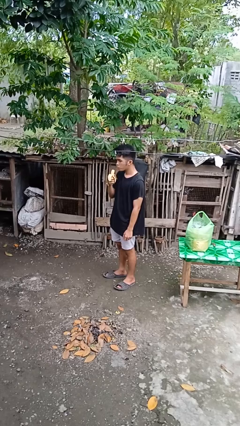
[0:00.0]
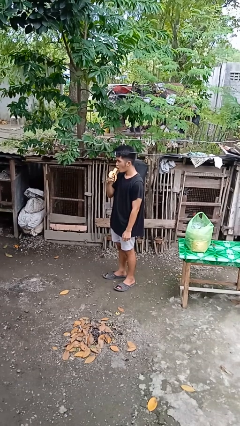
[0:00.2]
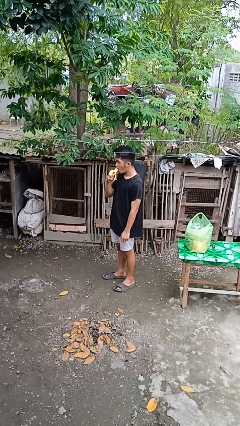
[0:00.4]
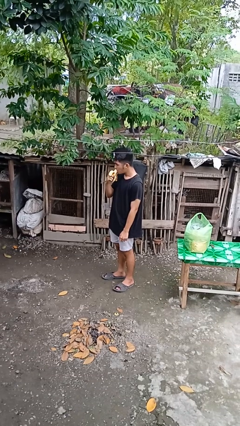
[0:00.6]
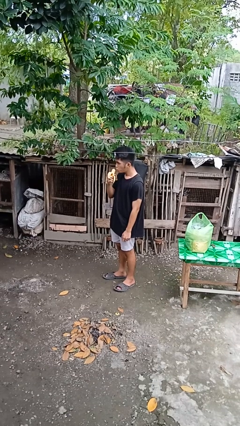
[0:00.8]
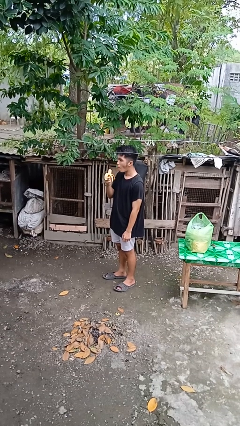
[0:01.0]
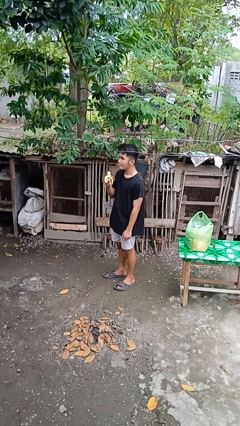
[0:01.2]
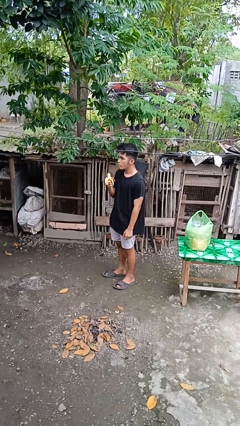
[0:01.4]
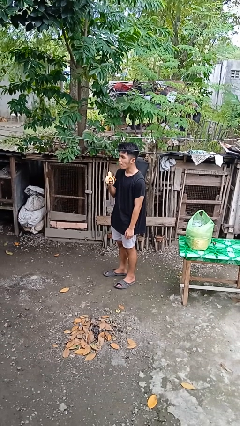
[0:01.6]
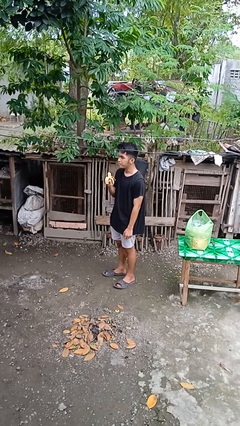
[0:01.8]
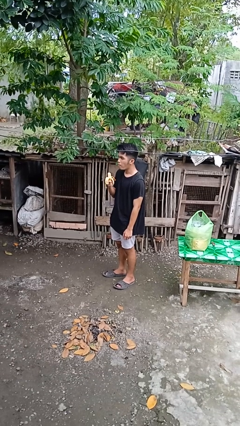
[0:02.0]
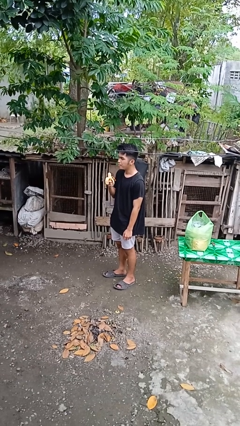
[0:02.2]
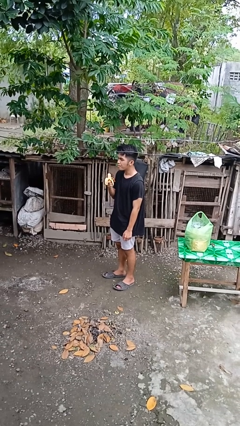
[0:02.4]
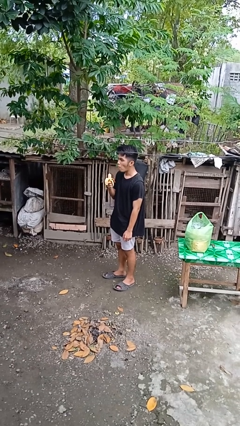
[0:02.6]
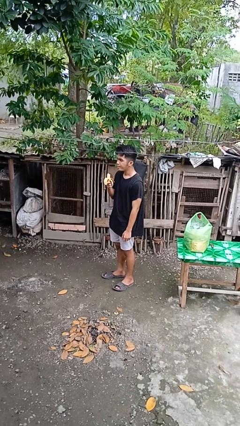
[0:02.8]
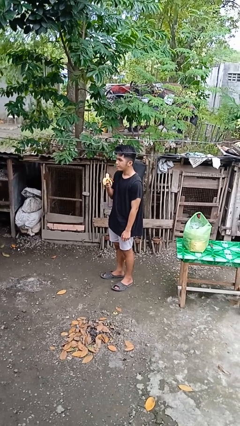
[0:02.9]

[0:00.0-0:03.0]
person eats banana

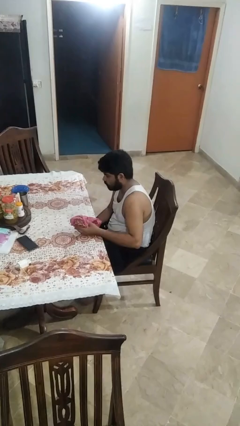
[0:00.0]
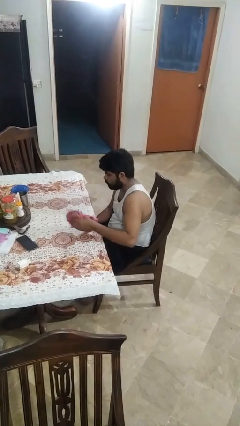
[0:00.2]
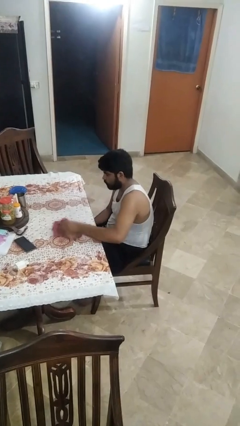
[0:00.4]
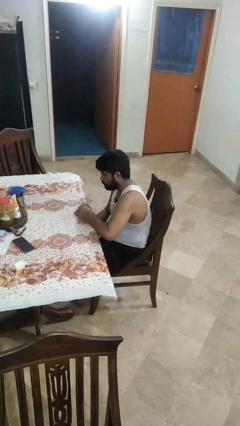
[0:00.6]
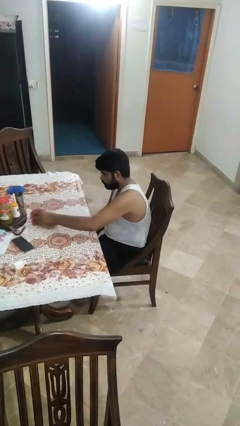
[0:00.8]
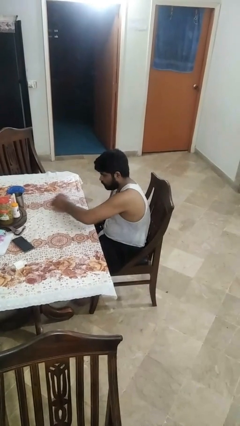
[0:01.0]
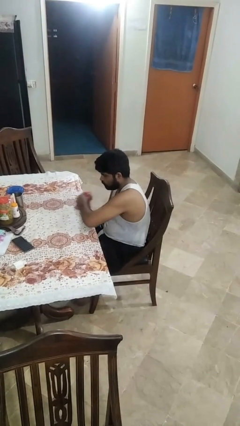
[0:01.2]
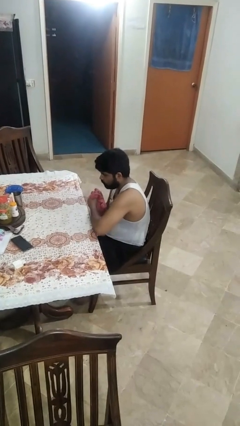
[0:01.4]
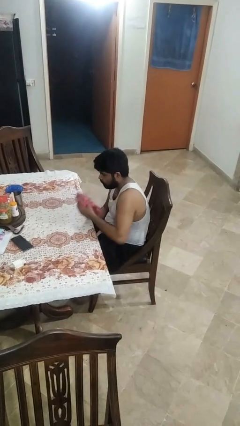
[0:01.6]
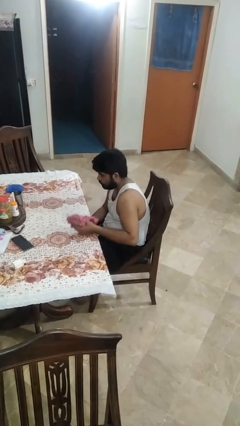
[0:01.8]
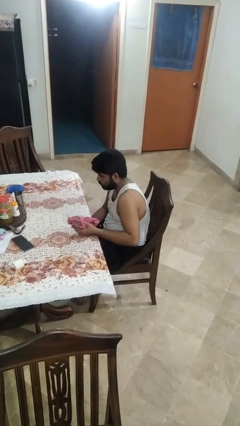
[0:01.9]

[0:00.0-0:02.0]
person cleans table with rag

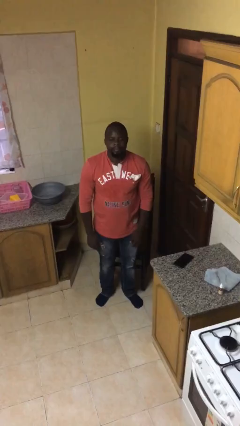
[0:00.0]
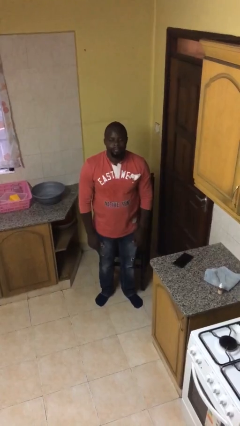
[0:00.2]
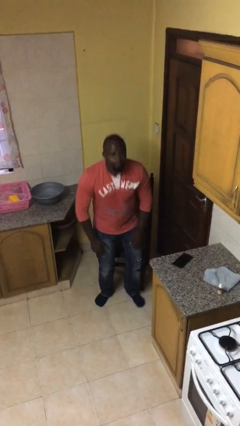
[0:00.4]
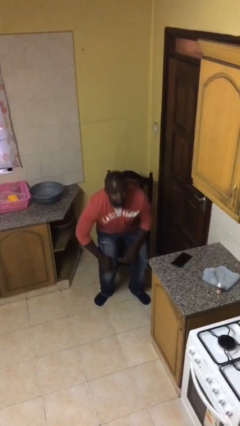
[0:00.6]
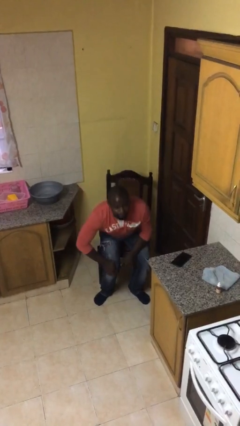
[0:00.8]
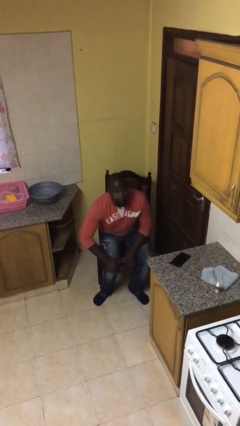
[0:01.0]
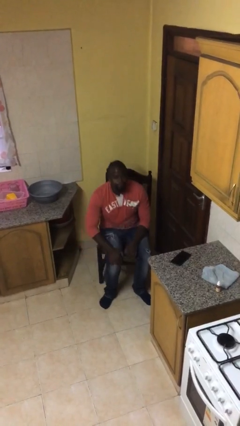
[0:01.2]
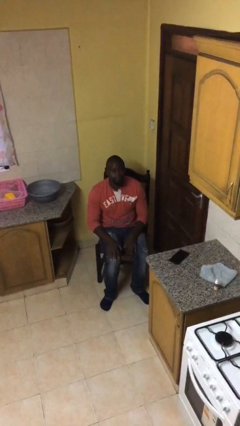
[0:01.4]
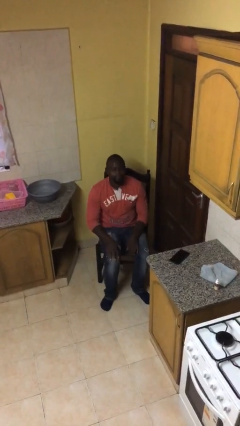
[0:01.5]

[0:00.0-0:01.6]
person sits down

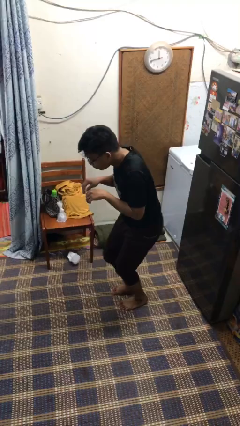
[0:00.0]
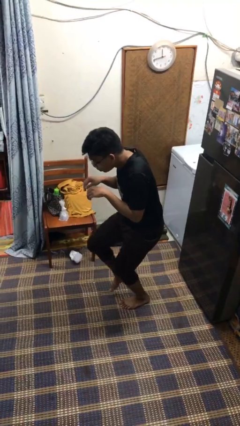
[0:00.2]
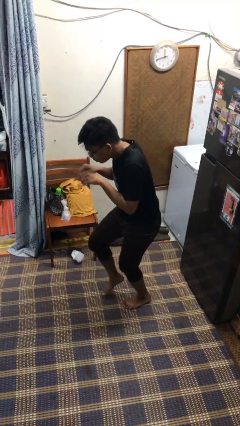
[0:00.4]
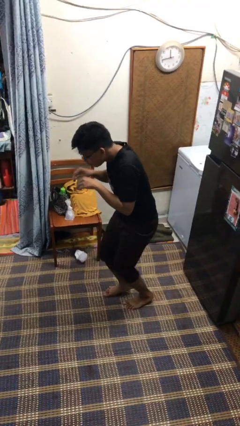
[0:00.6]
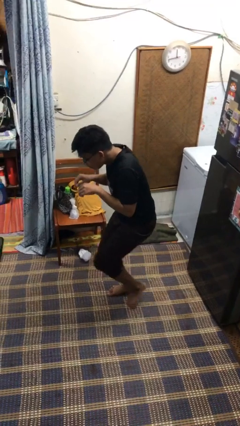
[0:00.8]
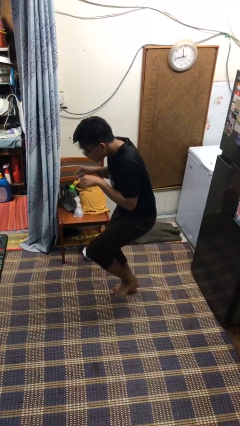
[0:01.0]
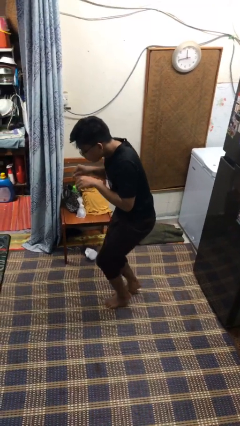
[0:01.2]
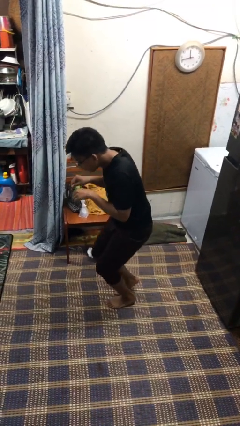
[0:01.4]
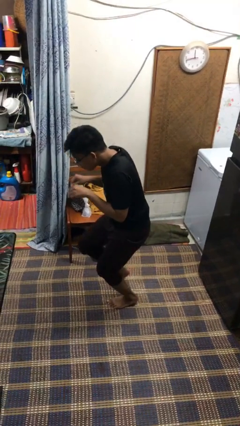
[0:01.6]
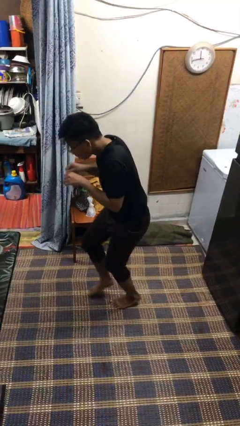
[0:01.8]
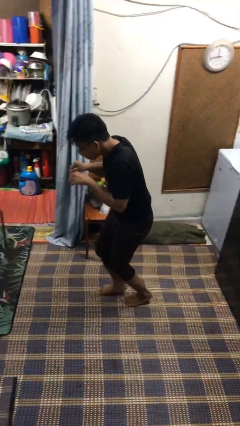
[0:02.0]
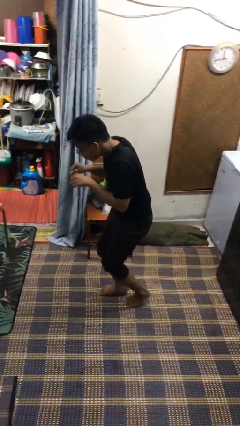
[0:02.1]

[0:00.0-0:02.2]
person walks tiptoe

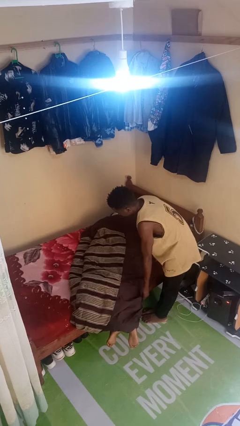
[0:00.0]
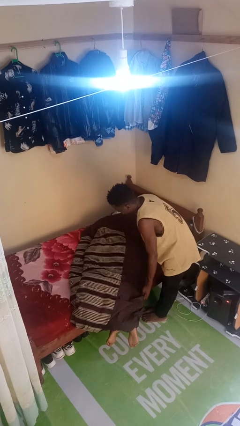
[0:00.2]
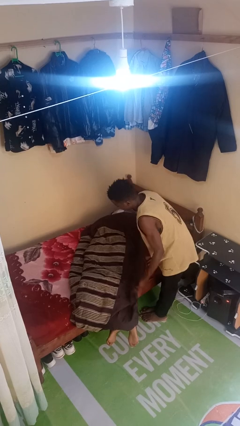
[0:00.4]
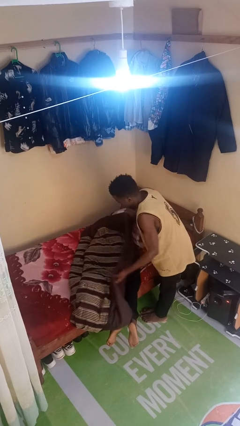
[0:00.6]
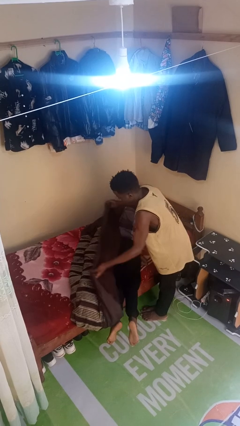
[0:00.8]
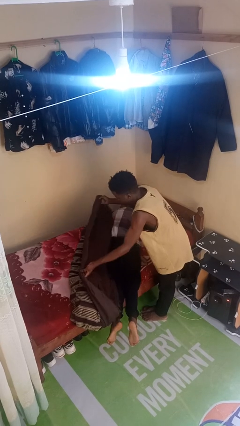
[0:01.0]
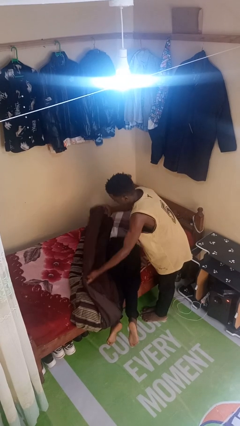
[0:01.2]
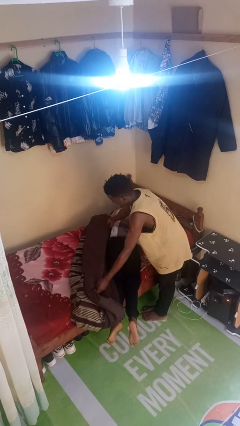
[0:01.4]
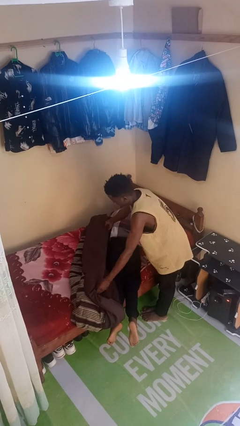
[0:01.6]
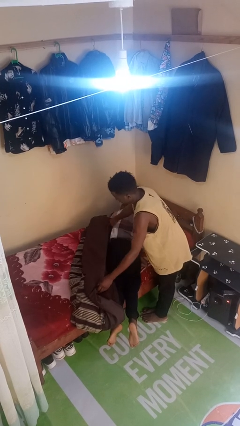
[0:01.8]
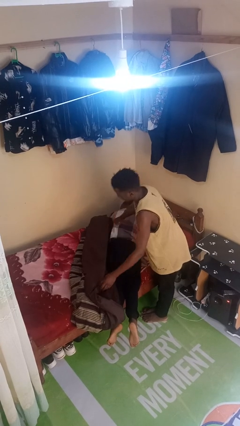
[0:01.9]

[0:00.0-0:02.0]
person uncovers friend with blanket

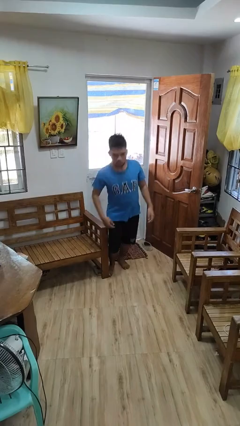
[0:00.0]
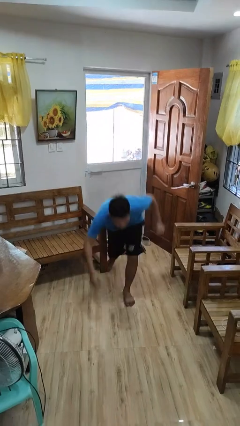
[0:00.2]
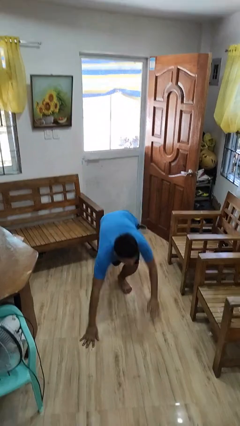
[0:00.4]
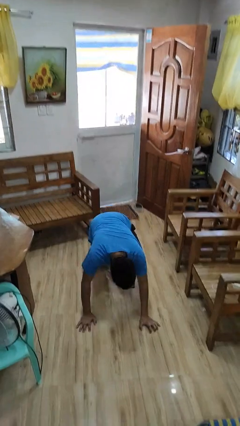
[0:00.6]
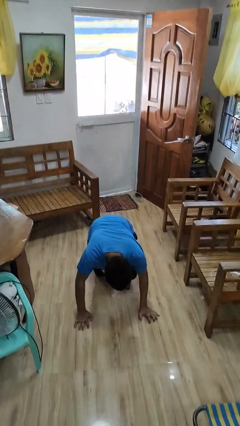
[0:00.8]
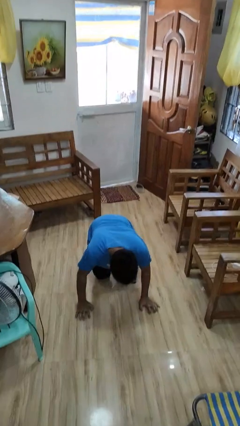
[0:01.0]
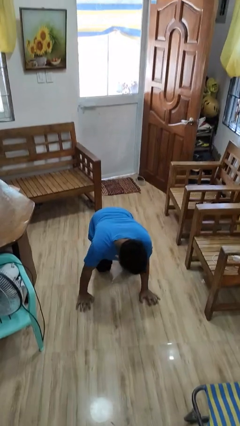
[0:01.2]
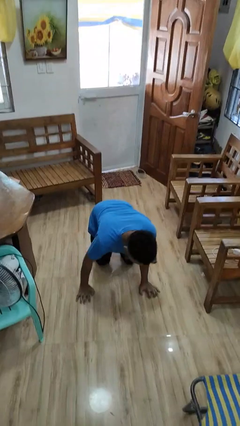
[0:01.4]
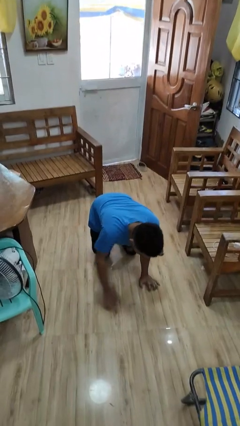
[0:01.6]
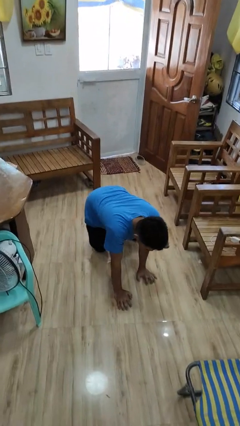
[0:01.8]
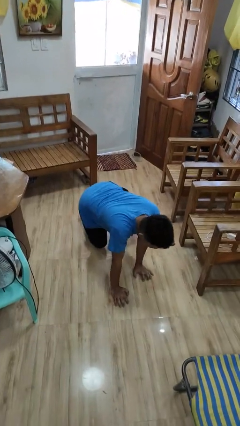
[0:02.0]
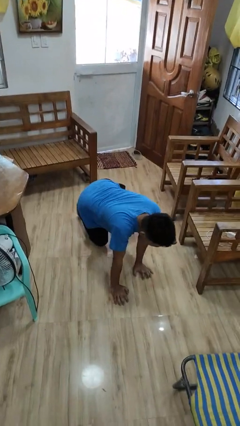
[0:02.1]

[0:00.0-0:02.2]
person trips on object on floor

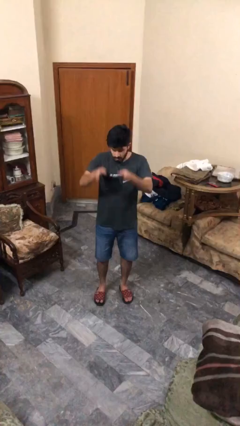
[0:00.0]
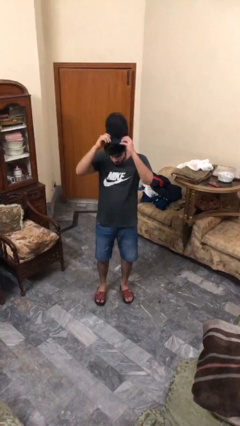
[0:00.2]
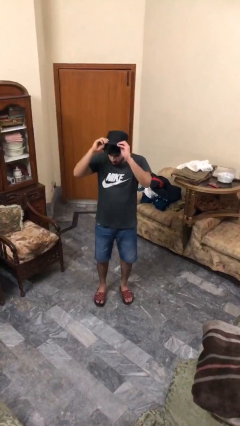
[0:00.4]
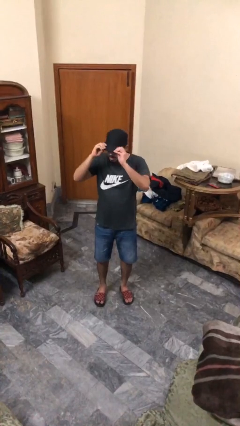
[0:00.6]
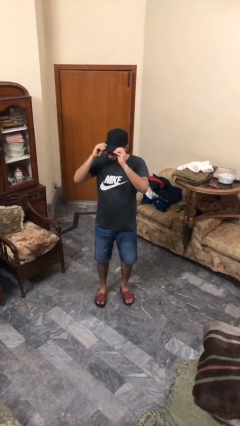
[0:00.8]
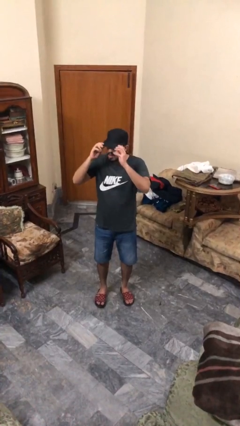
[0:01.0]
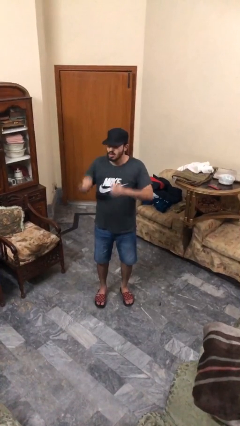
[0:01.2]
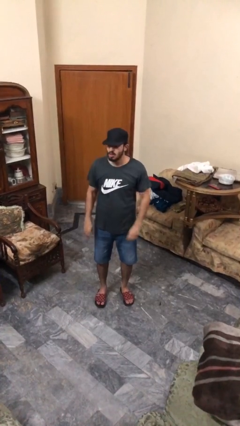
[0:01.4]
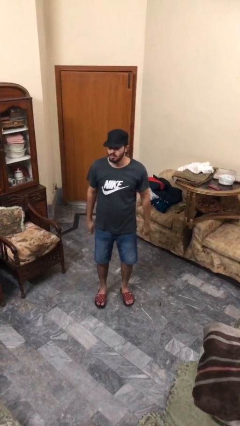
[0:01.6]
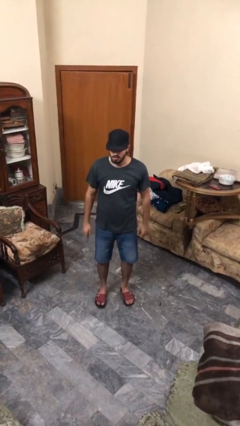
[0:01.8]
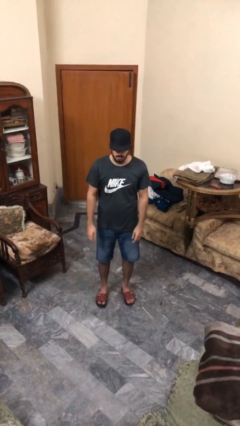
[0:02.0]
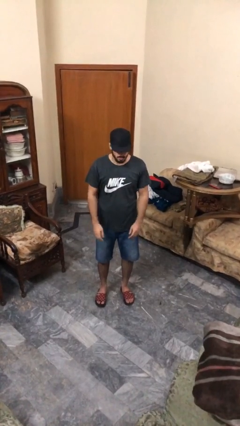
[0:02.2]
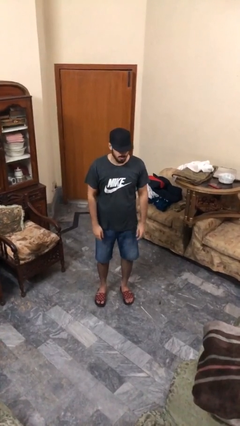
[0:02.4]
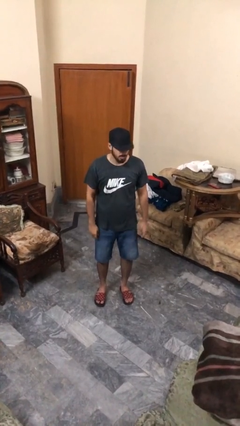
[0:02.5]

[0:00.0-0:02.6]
person puts on hat

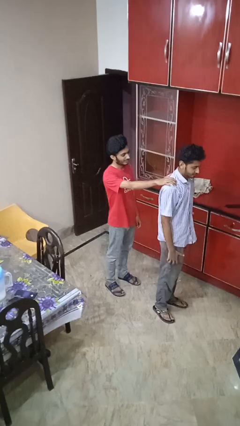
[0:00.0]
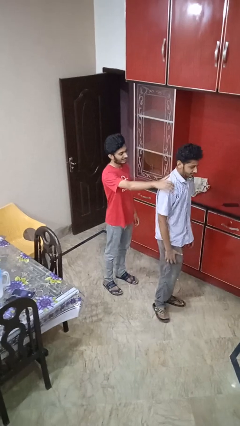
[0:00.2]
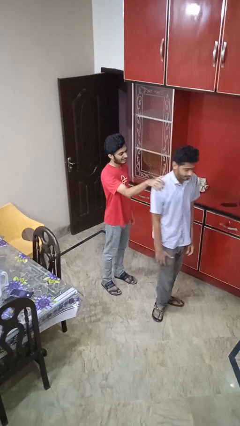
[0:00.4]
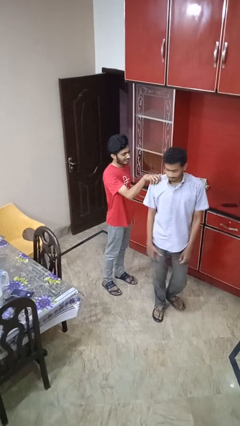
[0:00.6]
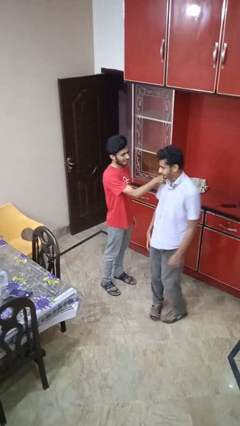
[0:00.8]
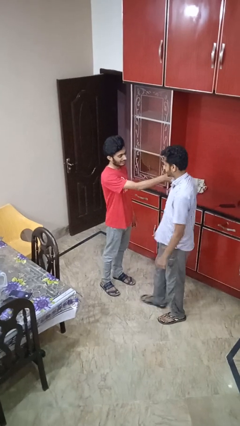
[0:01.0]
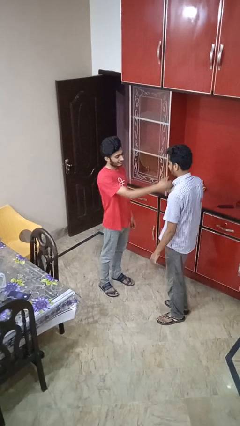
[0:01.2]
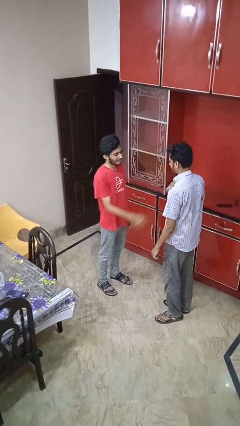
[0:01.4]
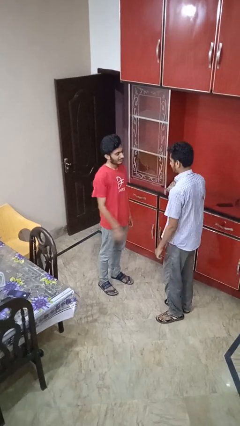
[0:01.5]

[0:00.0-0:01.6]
person spins person around
